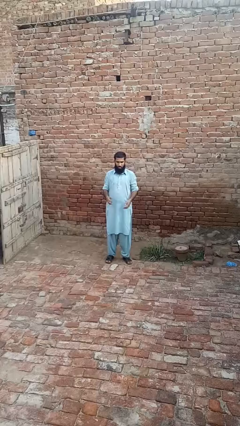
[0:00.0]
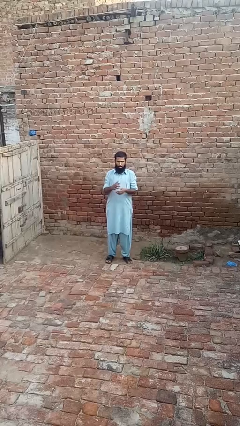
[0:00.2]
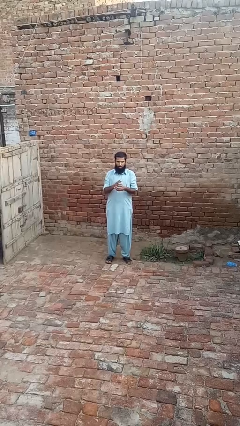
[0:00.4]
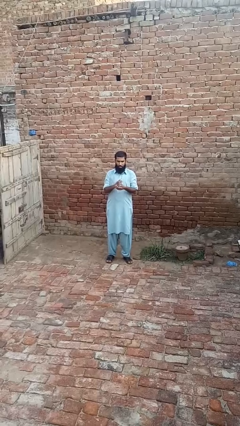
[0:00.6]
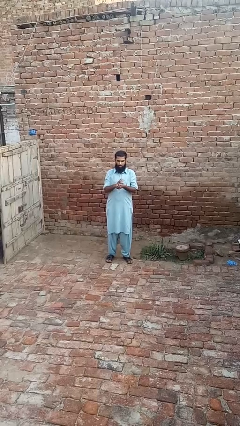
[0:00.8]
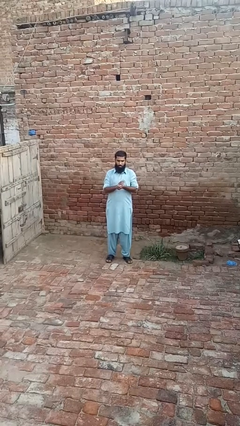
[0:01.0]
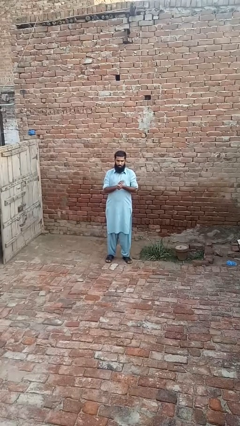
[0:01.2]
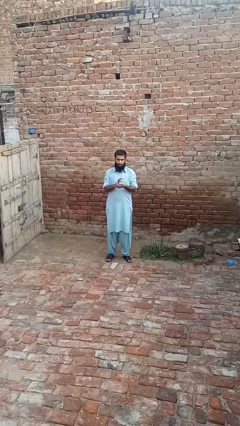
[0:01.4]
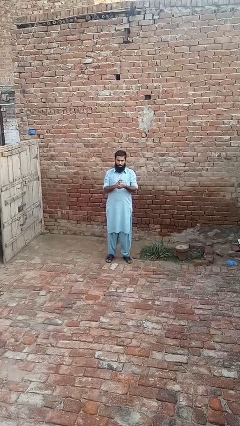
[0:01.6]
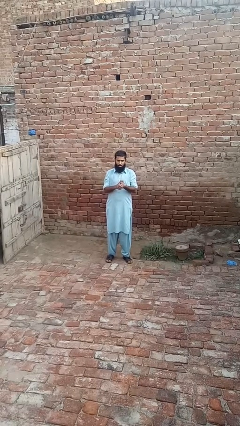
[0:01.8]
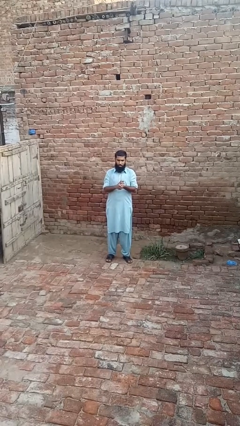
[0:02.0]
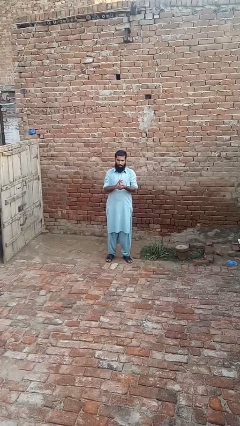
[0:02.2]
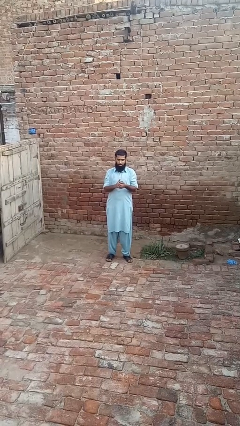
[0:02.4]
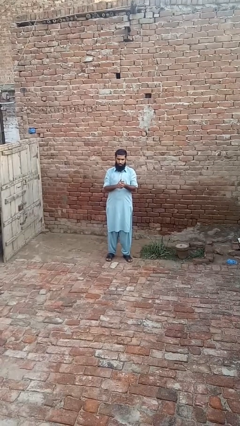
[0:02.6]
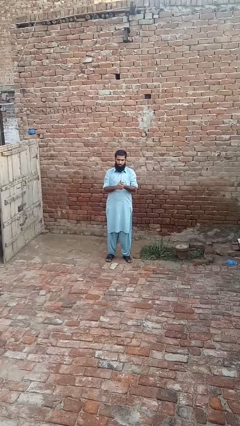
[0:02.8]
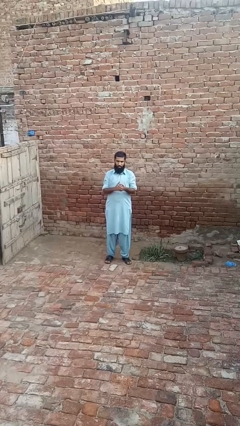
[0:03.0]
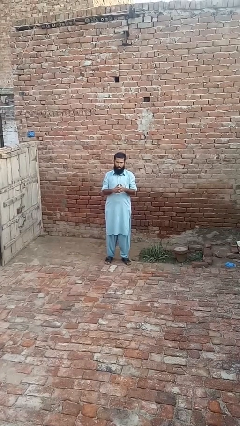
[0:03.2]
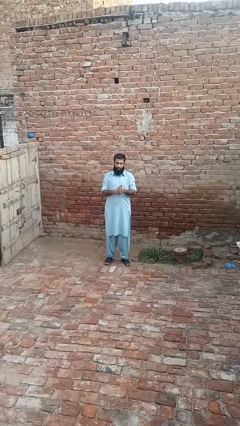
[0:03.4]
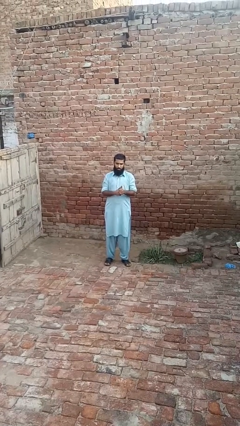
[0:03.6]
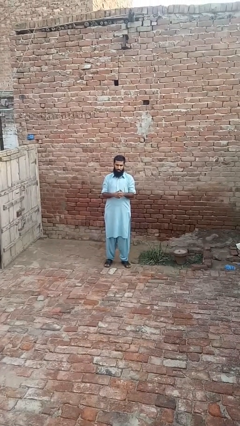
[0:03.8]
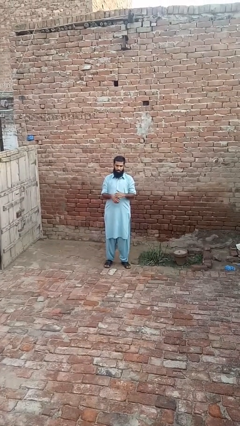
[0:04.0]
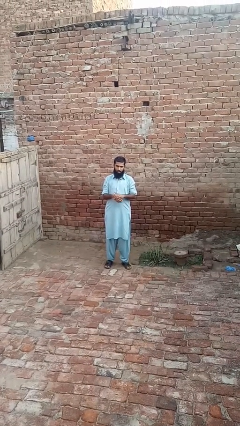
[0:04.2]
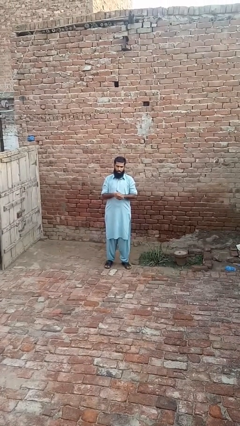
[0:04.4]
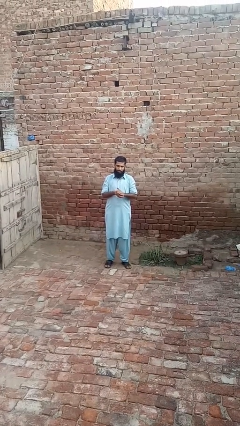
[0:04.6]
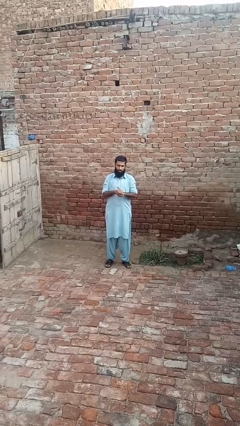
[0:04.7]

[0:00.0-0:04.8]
person cracks knuckles

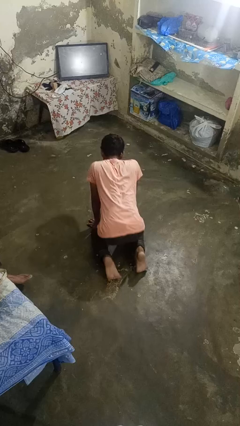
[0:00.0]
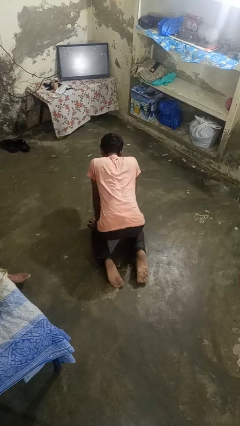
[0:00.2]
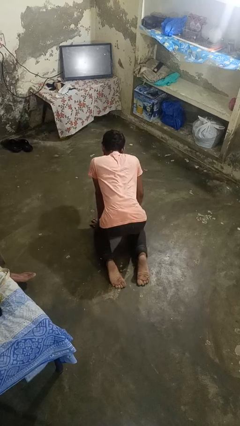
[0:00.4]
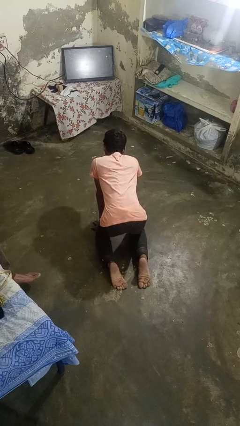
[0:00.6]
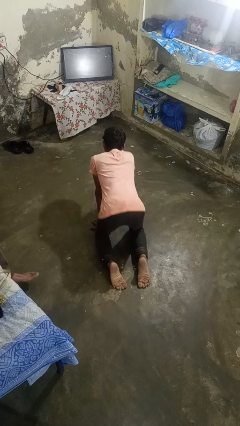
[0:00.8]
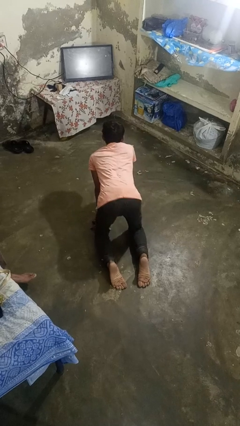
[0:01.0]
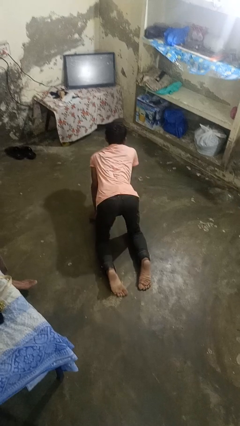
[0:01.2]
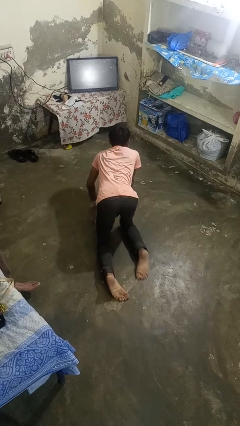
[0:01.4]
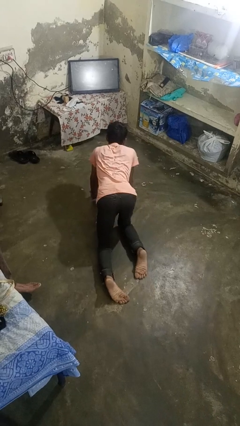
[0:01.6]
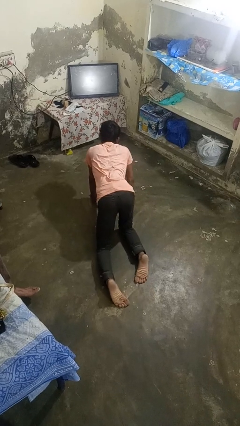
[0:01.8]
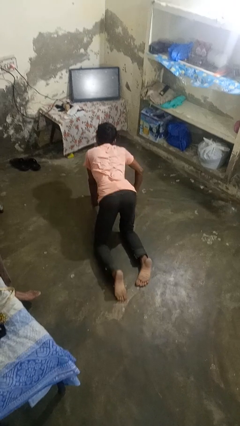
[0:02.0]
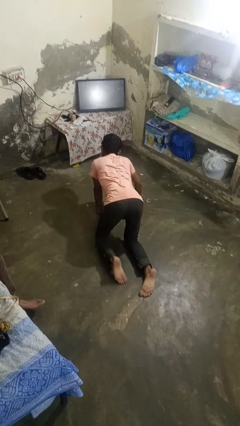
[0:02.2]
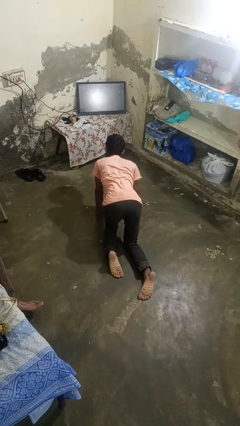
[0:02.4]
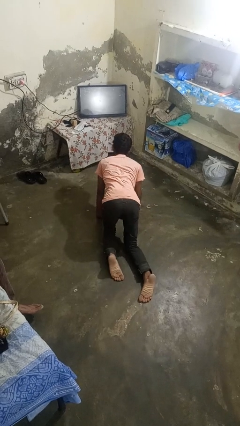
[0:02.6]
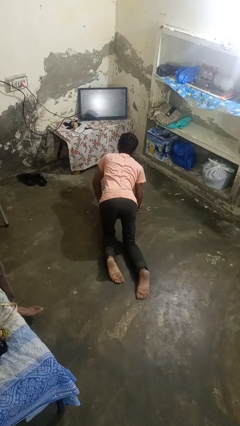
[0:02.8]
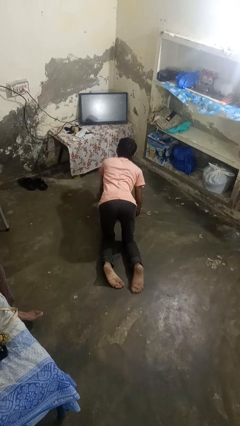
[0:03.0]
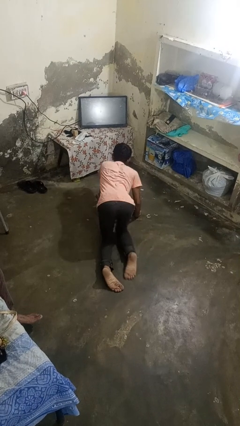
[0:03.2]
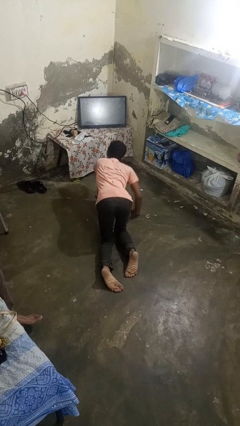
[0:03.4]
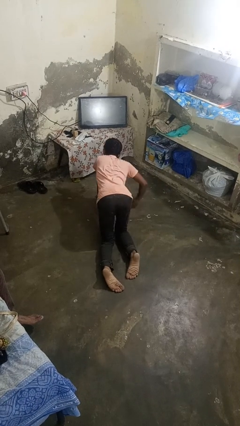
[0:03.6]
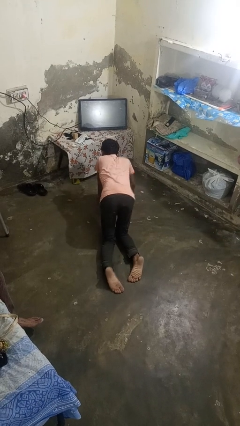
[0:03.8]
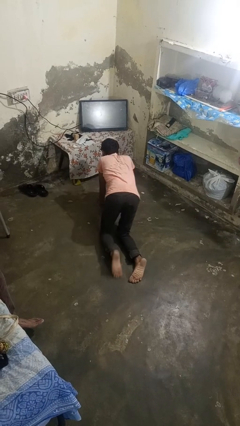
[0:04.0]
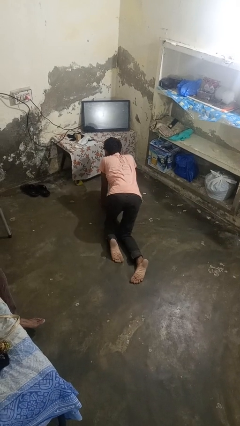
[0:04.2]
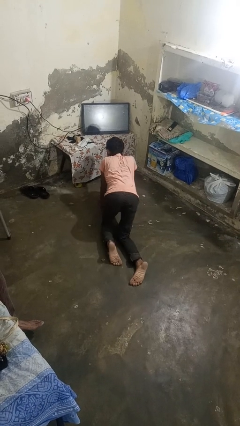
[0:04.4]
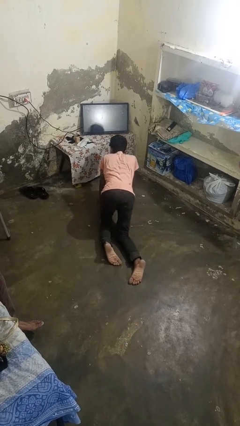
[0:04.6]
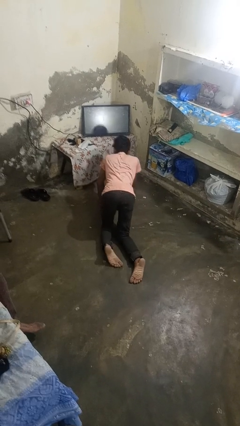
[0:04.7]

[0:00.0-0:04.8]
person crawls

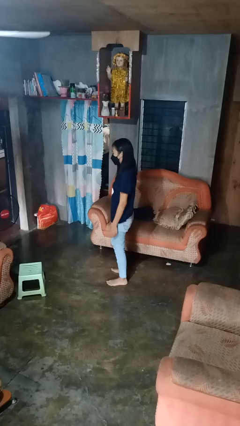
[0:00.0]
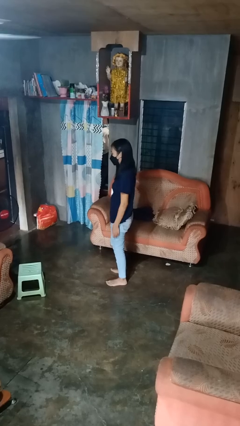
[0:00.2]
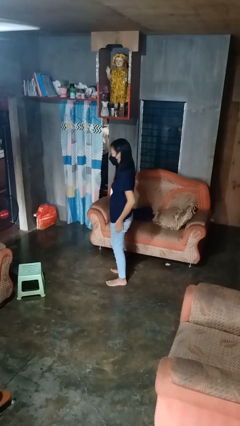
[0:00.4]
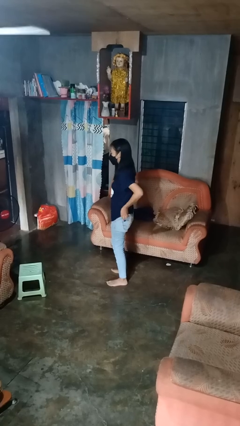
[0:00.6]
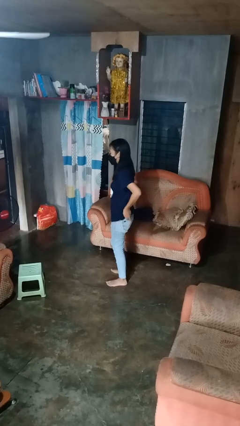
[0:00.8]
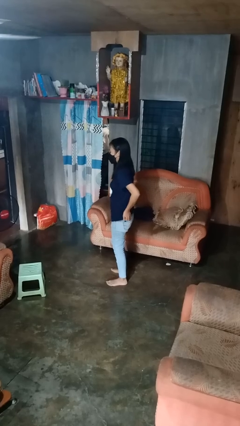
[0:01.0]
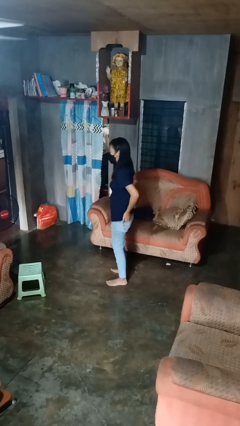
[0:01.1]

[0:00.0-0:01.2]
person puts hands in back pockets

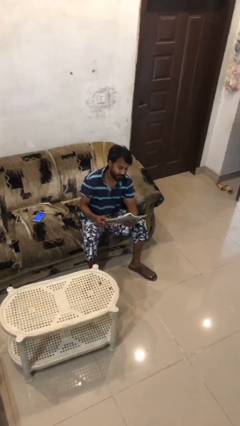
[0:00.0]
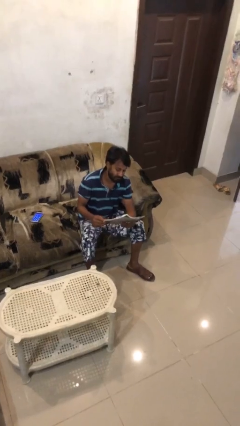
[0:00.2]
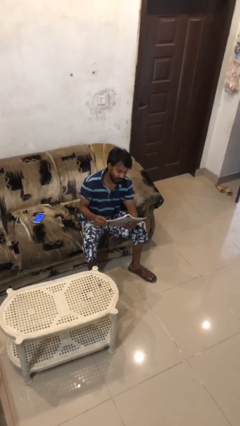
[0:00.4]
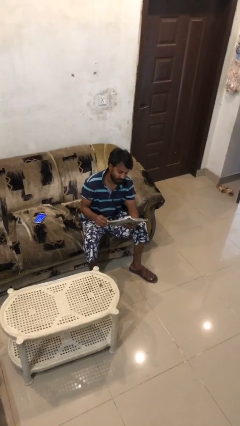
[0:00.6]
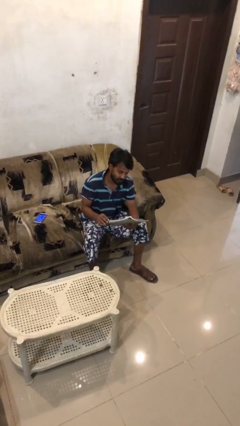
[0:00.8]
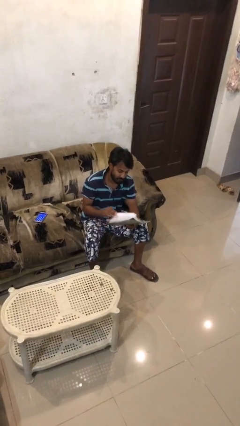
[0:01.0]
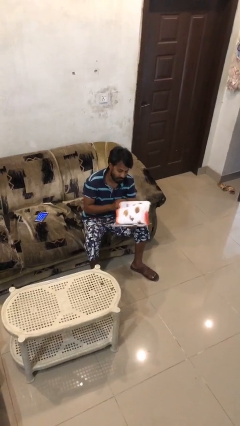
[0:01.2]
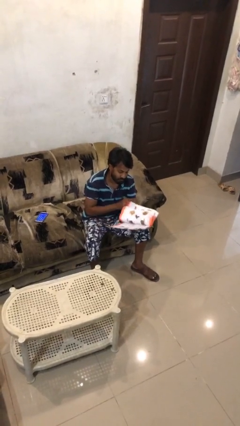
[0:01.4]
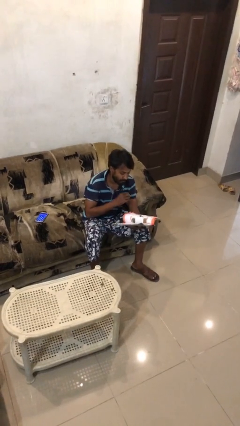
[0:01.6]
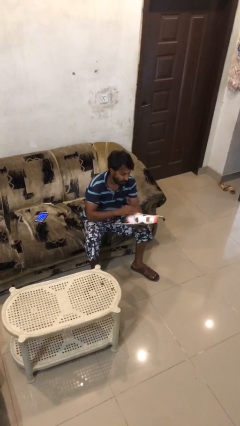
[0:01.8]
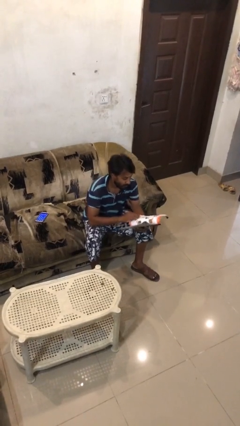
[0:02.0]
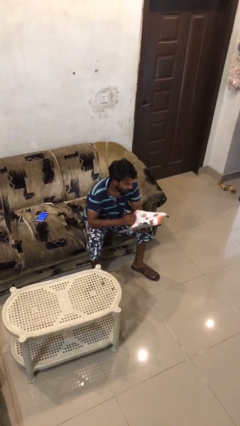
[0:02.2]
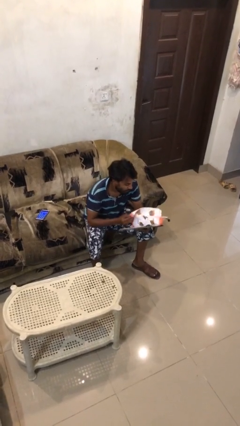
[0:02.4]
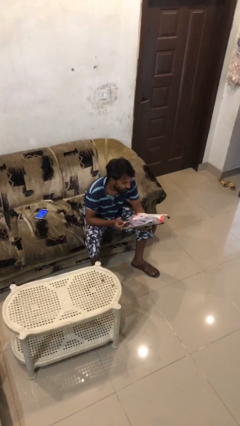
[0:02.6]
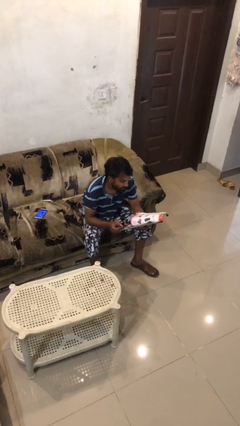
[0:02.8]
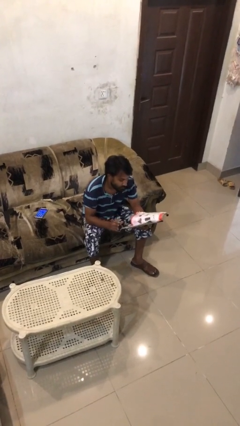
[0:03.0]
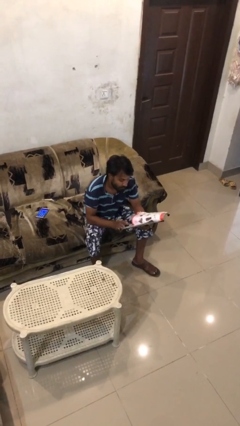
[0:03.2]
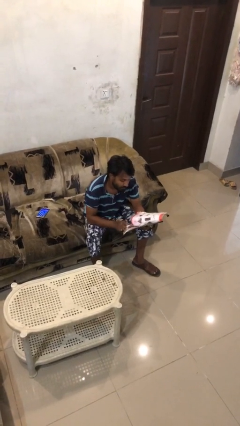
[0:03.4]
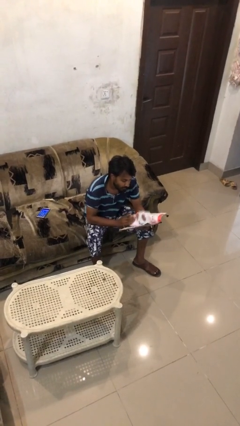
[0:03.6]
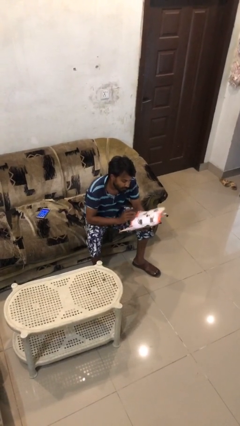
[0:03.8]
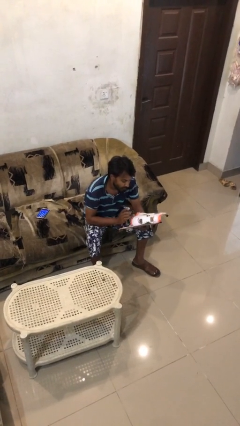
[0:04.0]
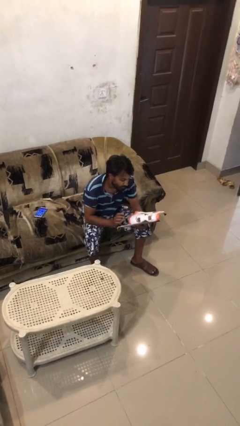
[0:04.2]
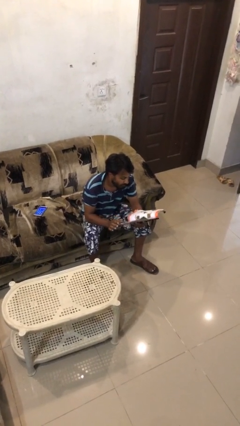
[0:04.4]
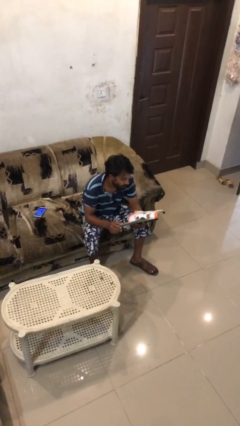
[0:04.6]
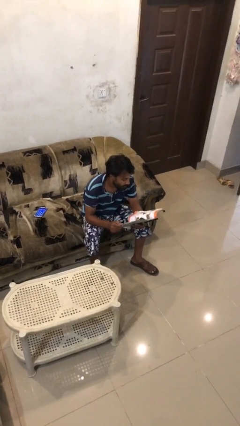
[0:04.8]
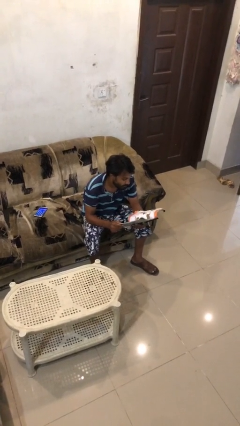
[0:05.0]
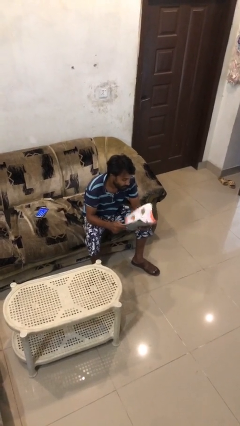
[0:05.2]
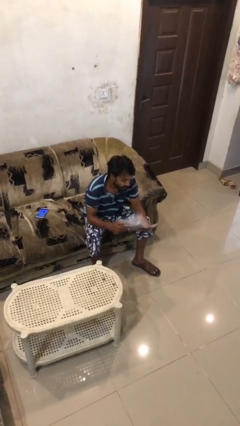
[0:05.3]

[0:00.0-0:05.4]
person reads document

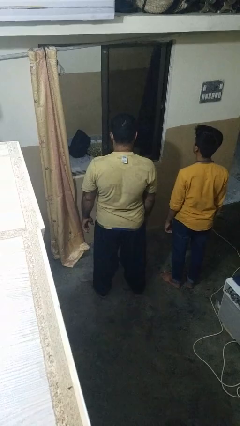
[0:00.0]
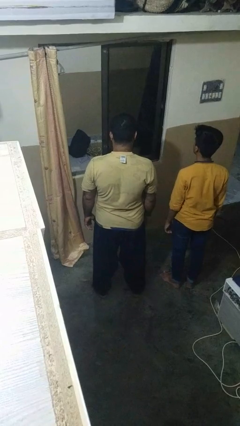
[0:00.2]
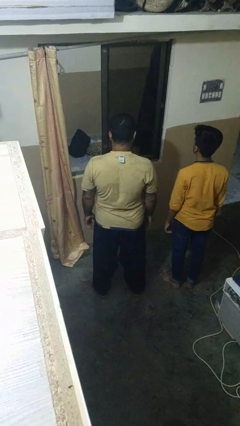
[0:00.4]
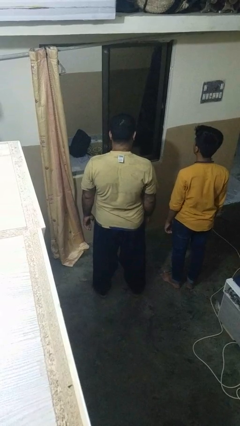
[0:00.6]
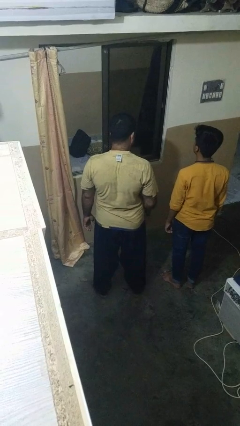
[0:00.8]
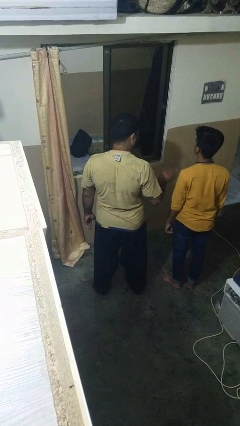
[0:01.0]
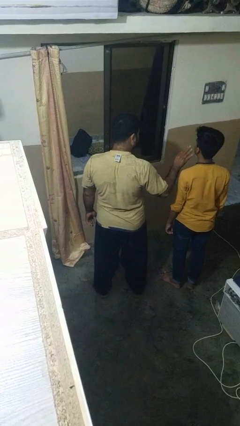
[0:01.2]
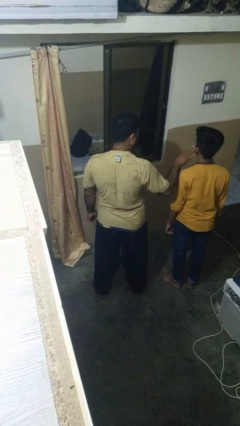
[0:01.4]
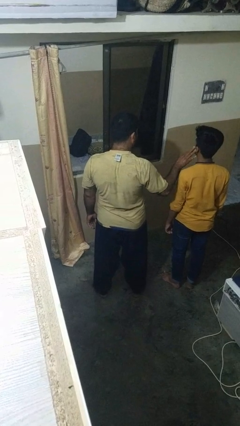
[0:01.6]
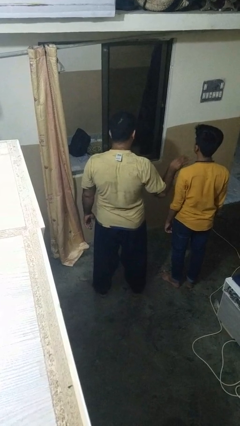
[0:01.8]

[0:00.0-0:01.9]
person touches face of person
